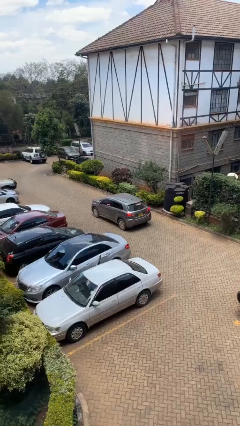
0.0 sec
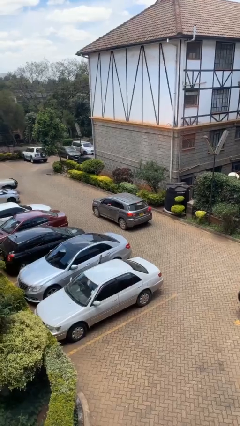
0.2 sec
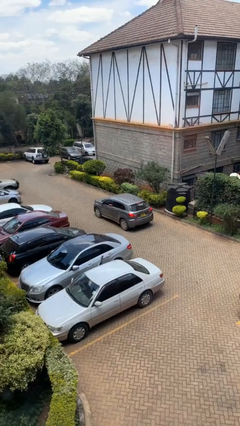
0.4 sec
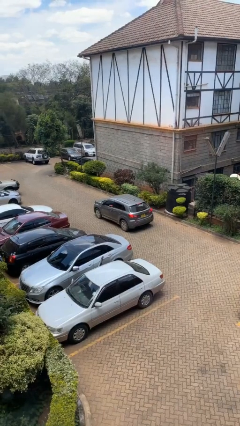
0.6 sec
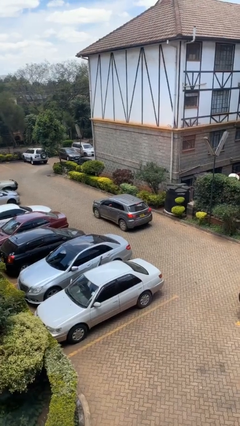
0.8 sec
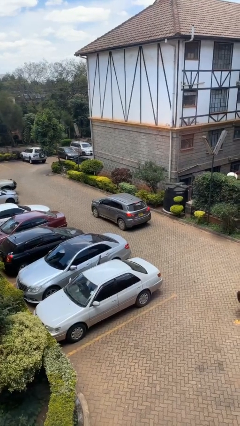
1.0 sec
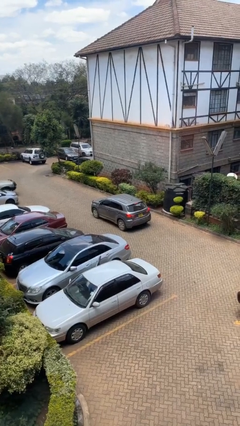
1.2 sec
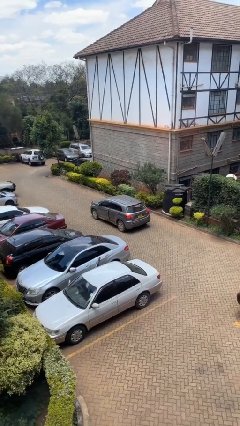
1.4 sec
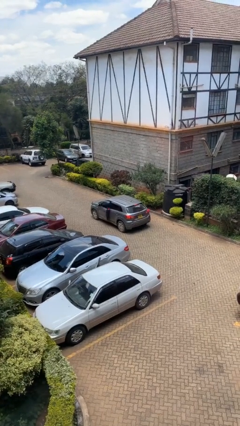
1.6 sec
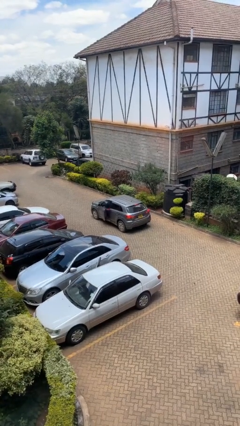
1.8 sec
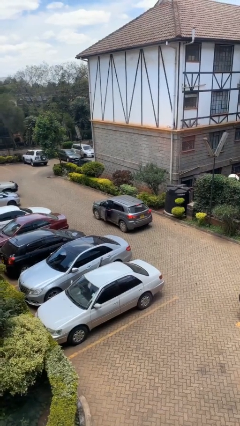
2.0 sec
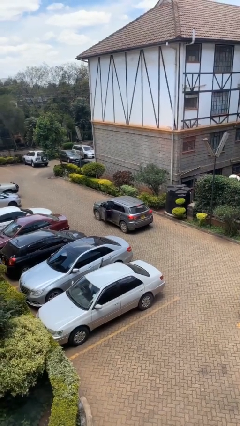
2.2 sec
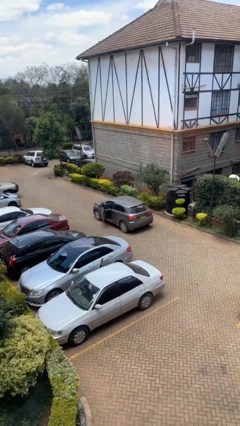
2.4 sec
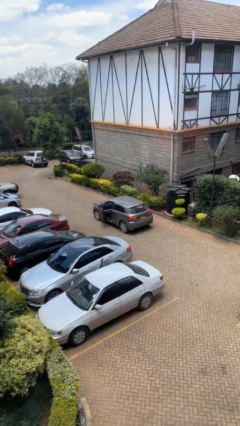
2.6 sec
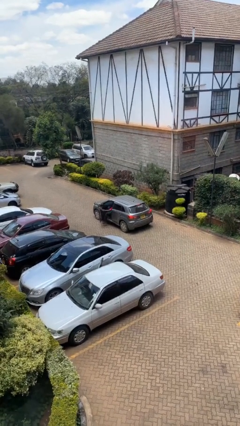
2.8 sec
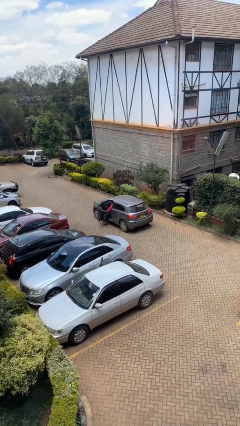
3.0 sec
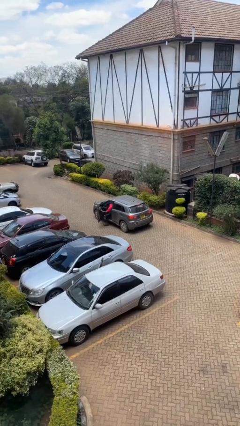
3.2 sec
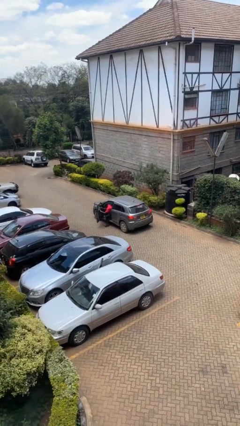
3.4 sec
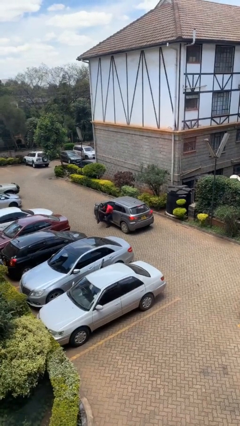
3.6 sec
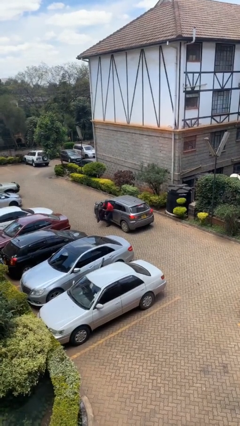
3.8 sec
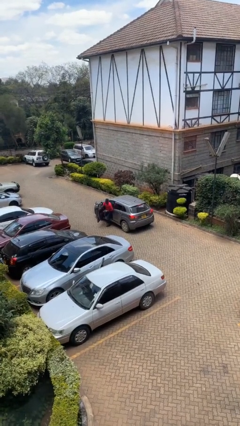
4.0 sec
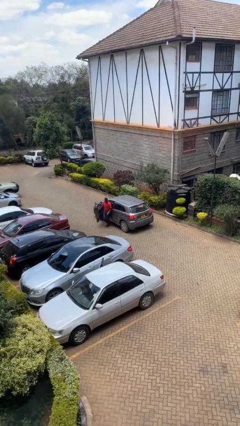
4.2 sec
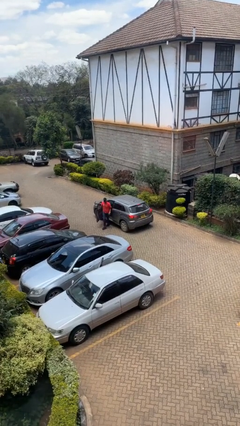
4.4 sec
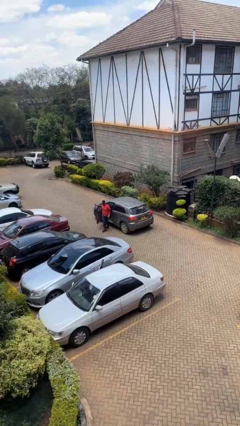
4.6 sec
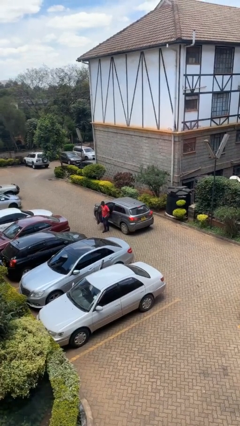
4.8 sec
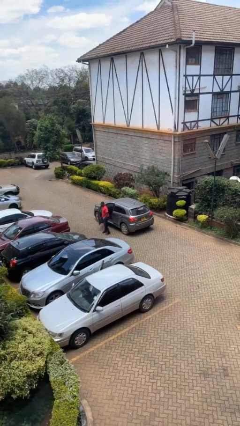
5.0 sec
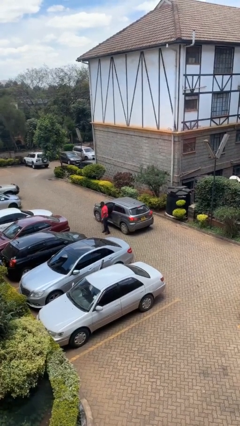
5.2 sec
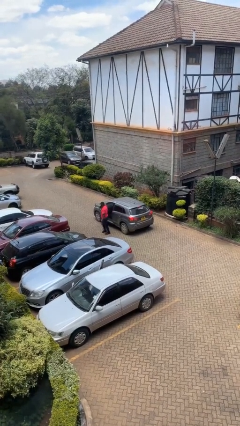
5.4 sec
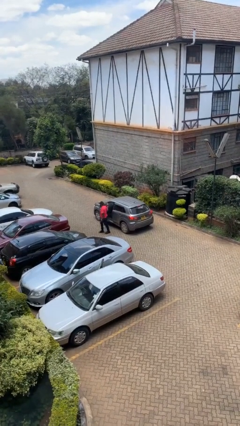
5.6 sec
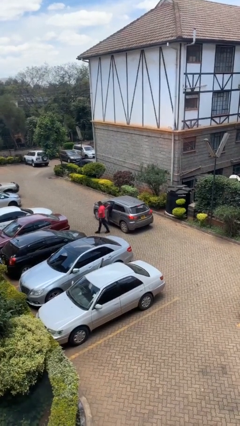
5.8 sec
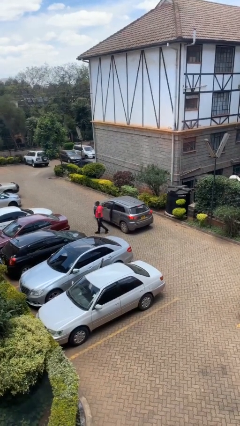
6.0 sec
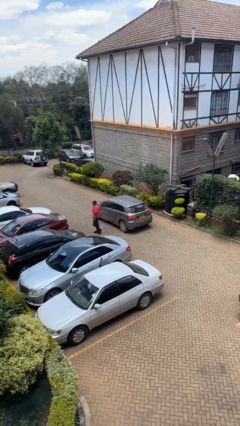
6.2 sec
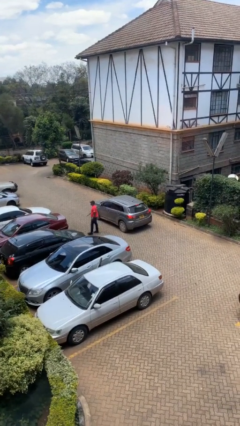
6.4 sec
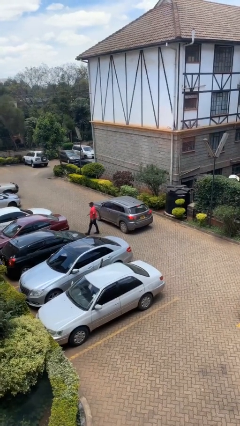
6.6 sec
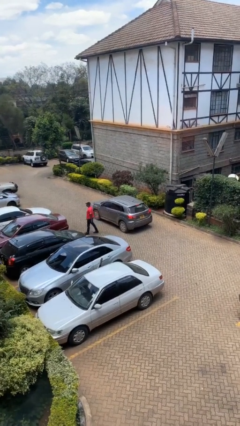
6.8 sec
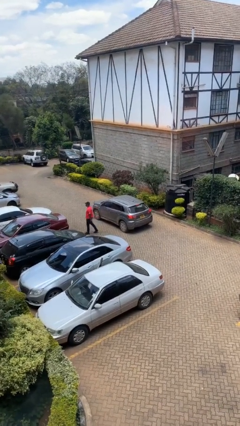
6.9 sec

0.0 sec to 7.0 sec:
car drops off person

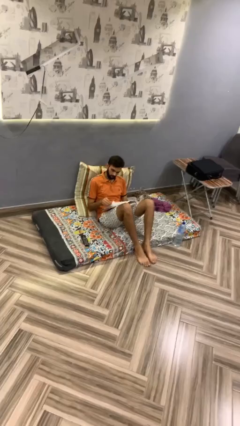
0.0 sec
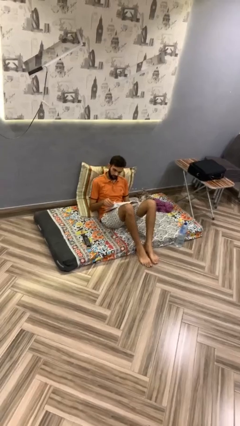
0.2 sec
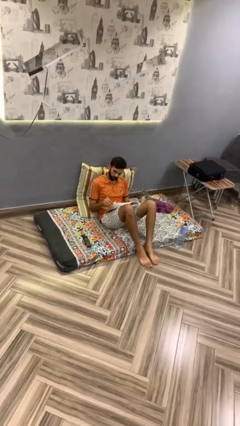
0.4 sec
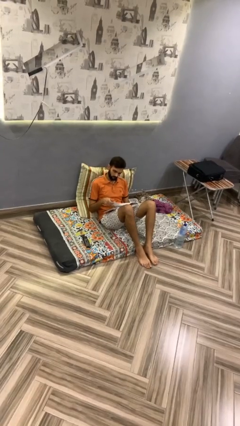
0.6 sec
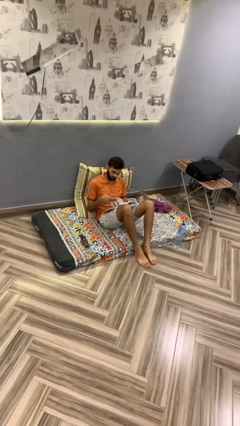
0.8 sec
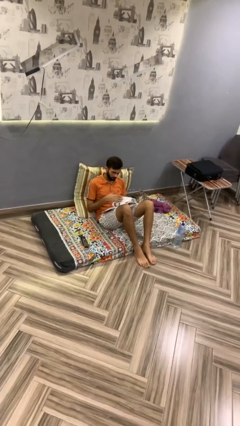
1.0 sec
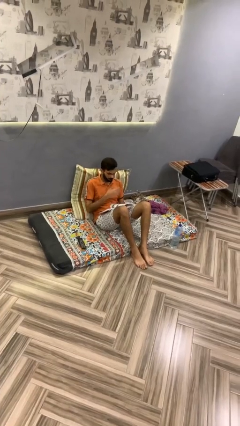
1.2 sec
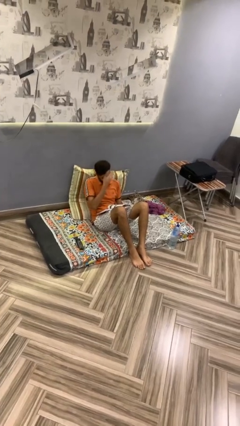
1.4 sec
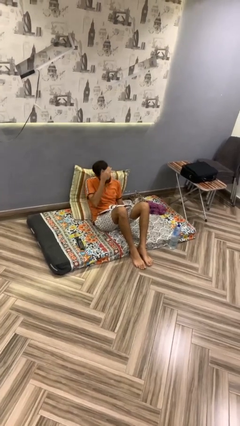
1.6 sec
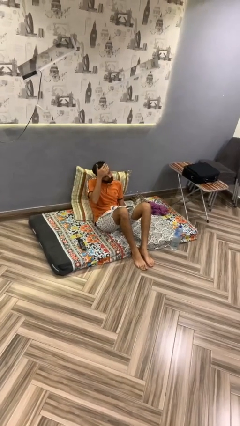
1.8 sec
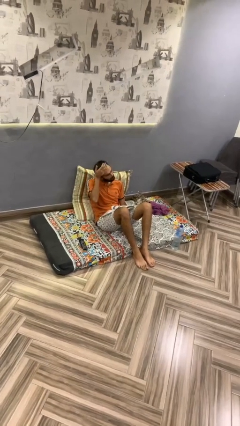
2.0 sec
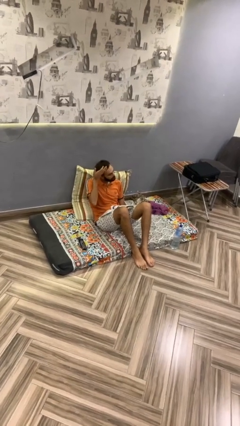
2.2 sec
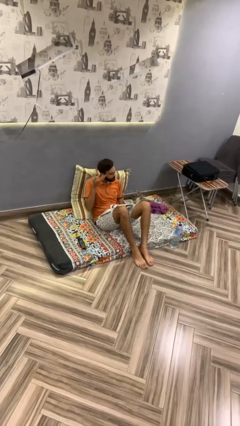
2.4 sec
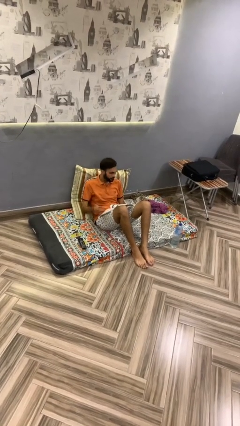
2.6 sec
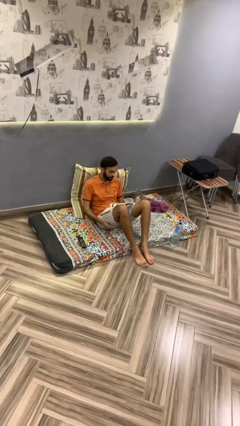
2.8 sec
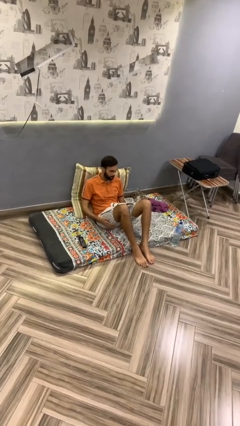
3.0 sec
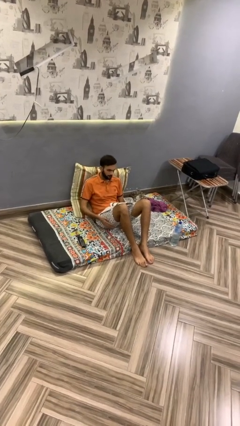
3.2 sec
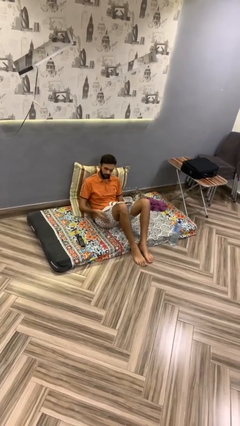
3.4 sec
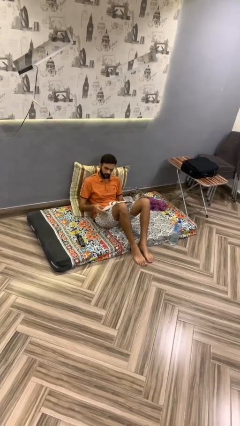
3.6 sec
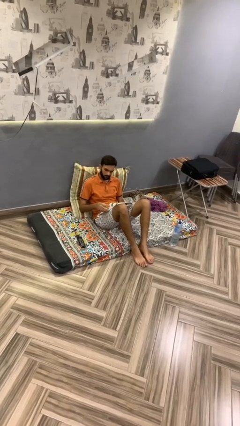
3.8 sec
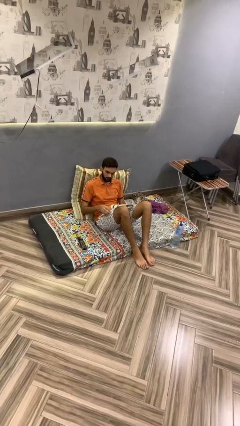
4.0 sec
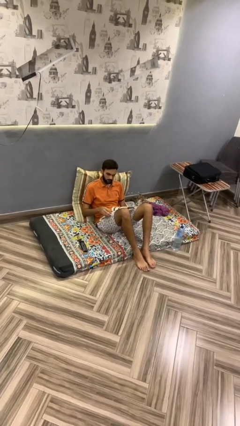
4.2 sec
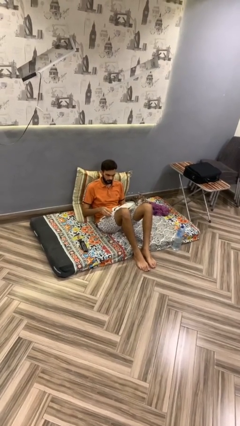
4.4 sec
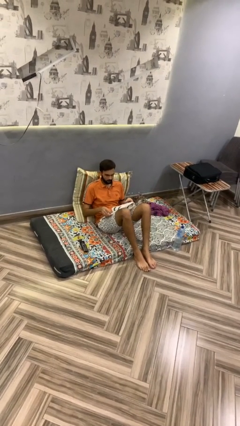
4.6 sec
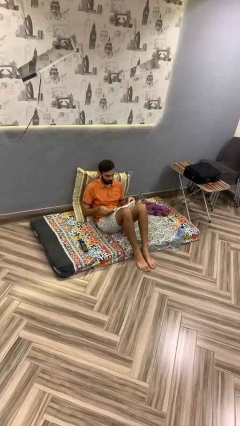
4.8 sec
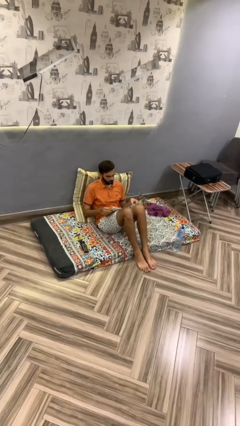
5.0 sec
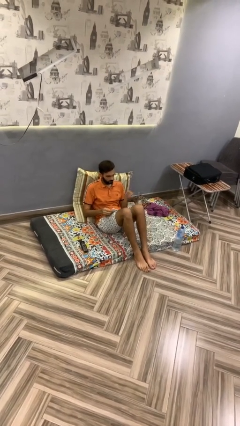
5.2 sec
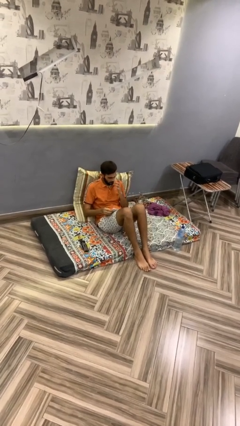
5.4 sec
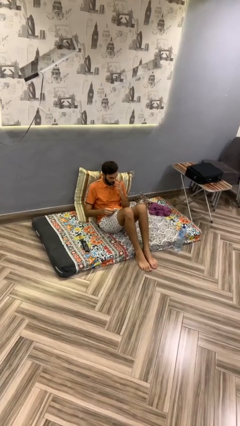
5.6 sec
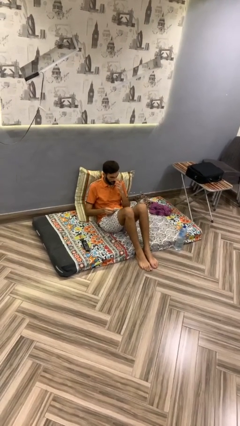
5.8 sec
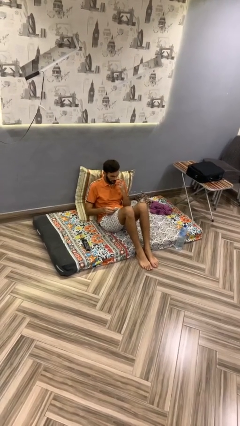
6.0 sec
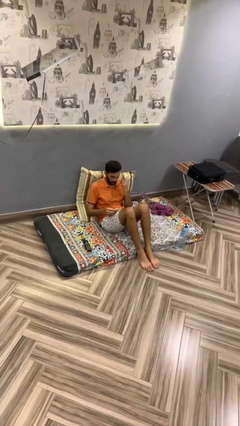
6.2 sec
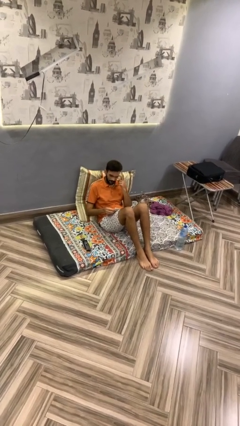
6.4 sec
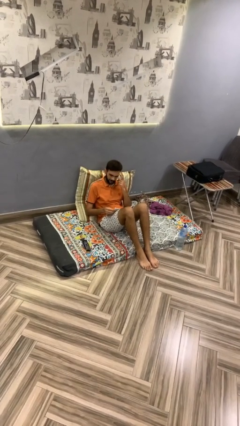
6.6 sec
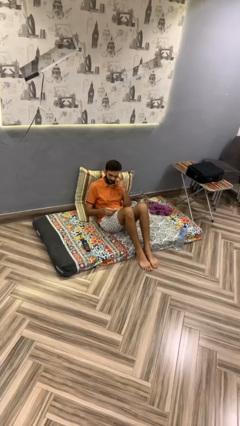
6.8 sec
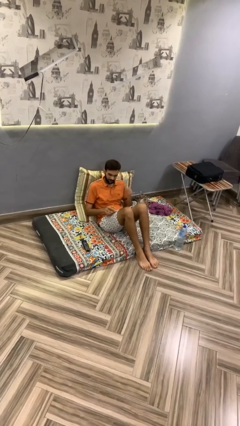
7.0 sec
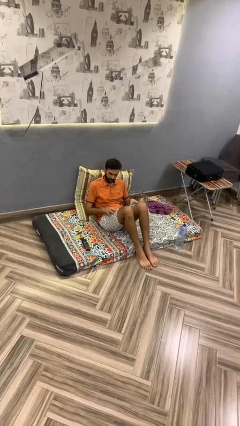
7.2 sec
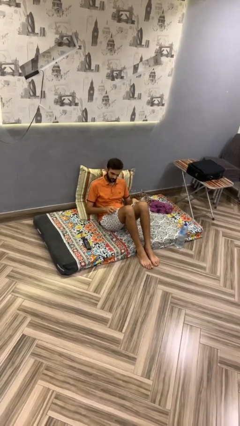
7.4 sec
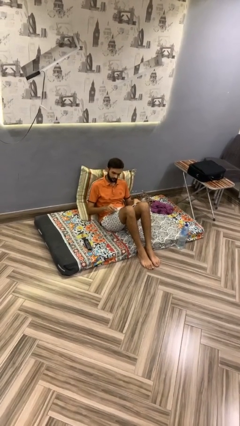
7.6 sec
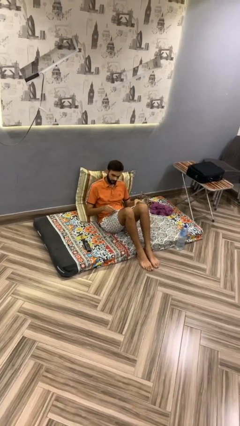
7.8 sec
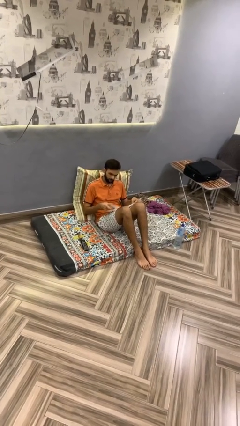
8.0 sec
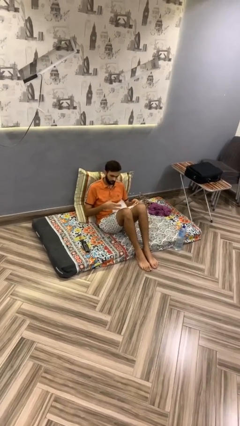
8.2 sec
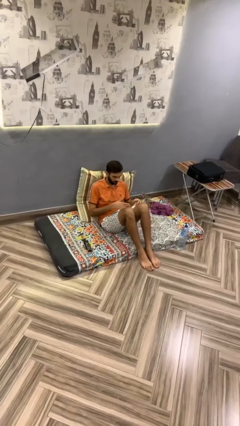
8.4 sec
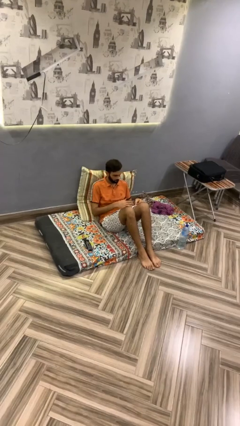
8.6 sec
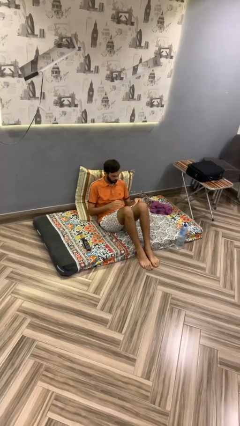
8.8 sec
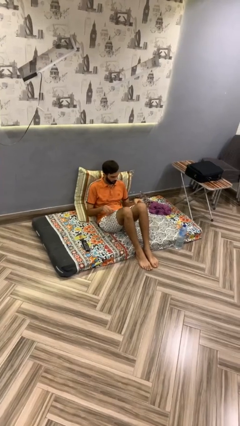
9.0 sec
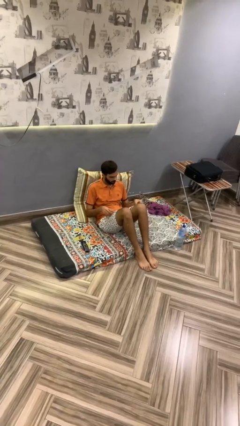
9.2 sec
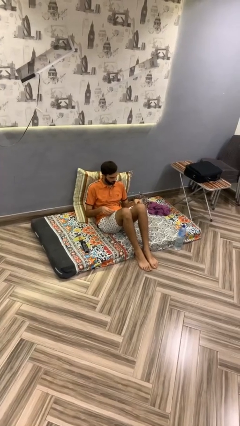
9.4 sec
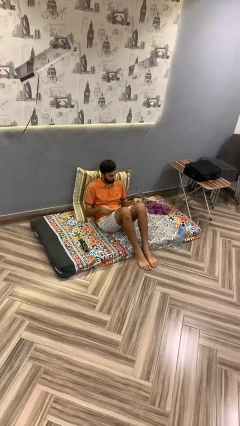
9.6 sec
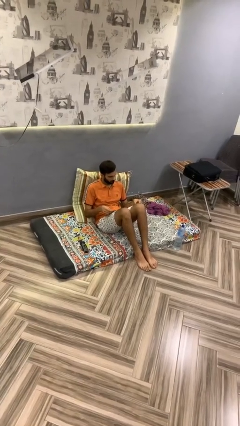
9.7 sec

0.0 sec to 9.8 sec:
person reads document

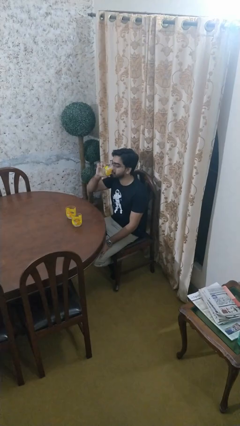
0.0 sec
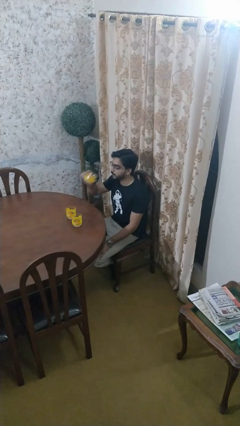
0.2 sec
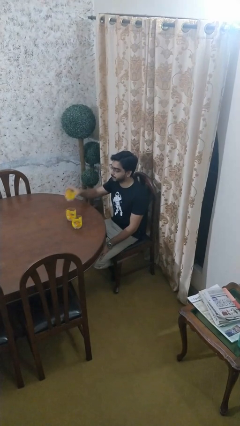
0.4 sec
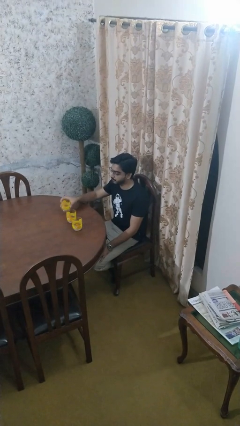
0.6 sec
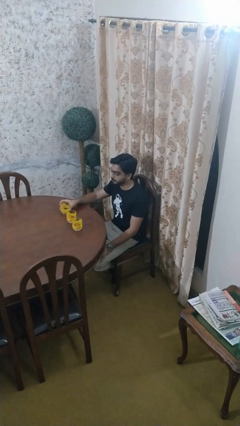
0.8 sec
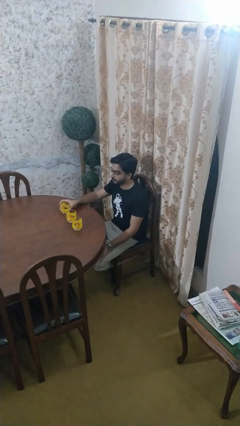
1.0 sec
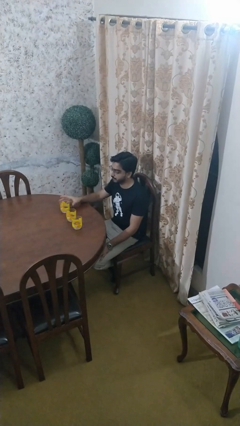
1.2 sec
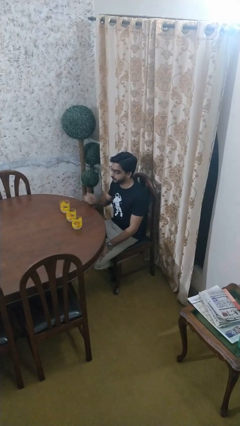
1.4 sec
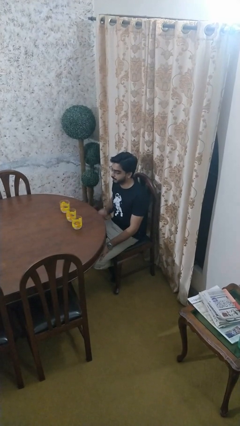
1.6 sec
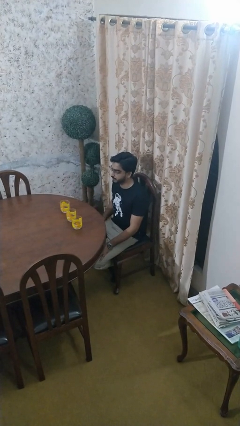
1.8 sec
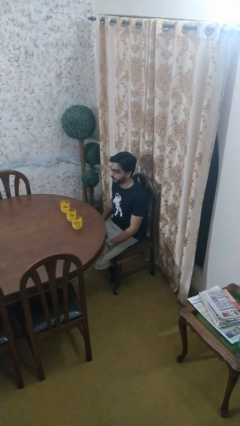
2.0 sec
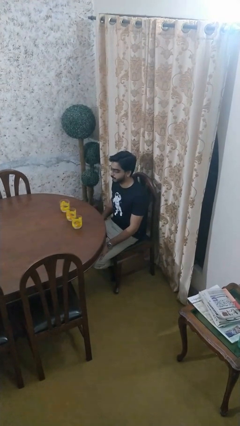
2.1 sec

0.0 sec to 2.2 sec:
person puts down object on table
